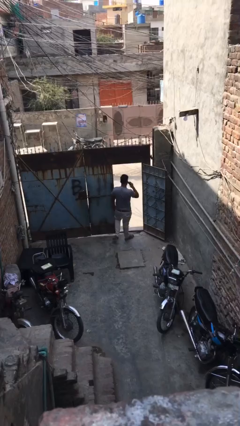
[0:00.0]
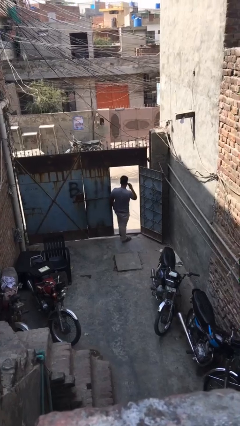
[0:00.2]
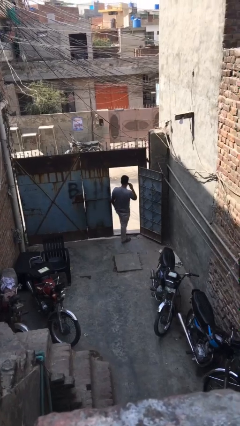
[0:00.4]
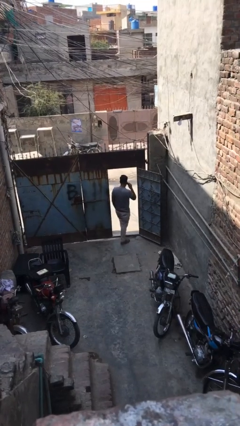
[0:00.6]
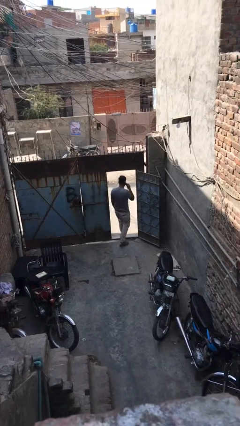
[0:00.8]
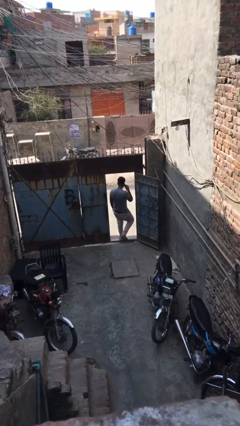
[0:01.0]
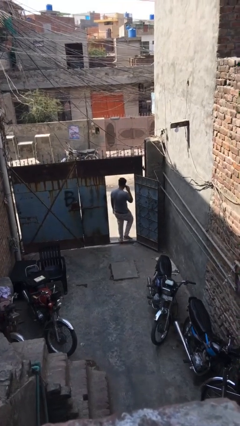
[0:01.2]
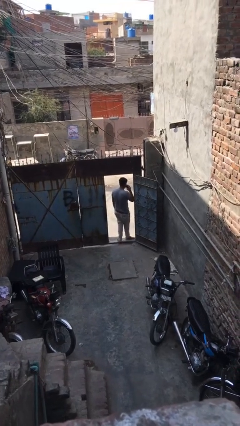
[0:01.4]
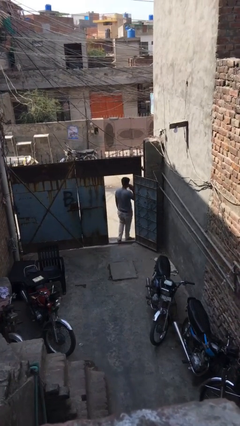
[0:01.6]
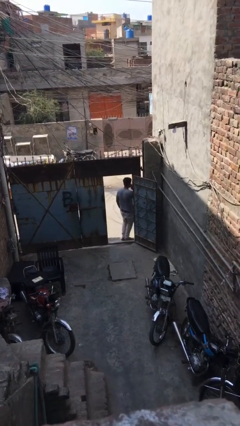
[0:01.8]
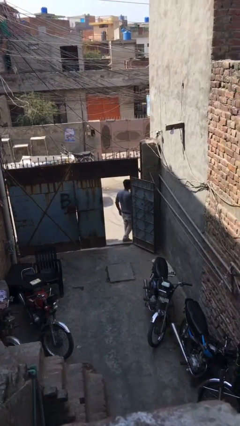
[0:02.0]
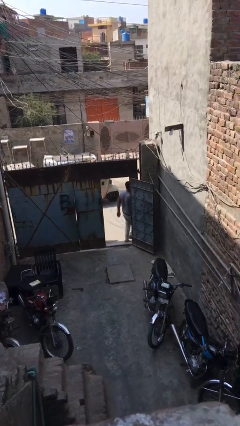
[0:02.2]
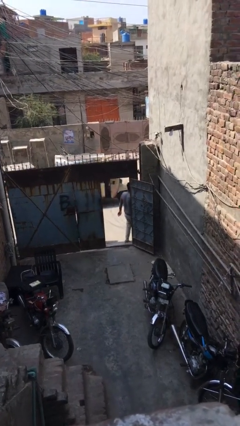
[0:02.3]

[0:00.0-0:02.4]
person exits scene through structure

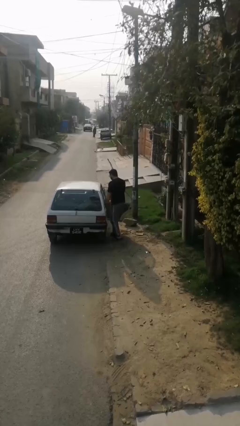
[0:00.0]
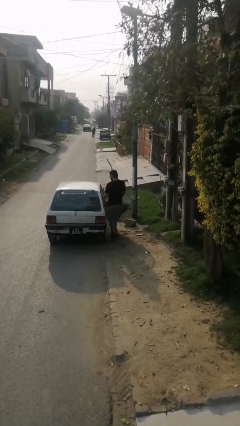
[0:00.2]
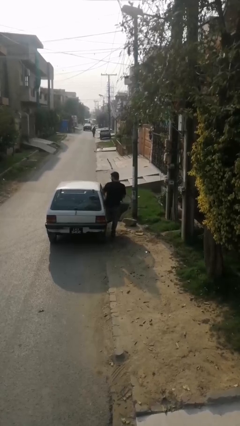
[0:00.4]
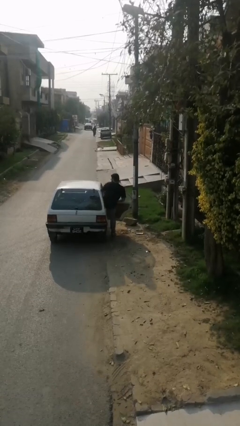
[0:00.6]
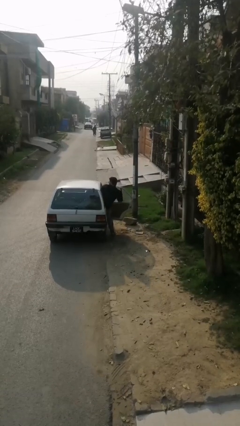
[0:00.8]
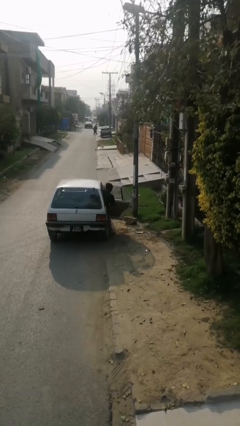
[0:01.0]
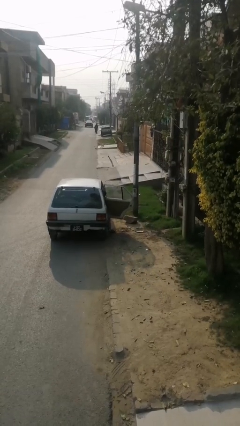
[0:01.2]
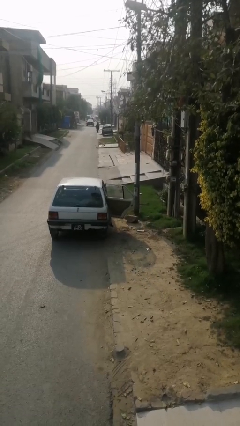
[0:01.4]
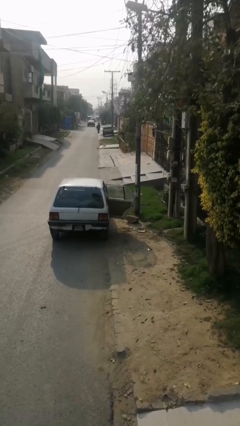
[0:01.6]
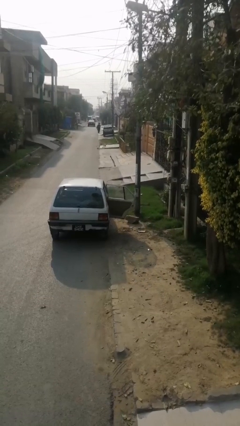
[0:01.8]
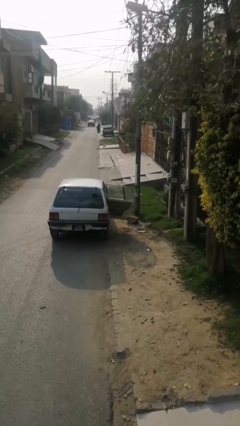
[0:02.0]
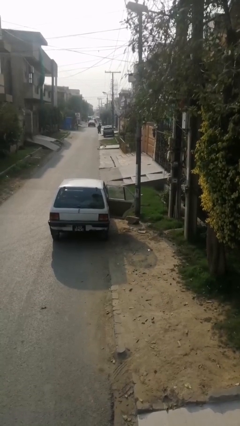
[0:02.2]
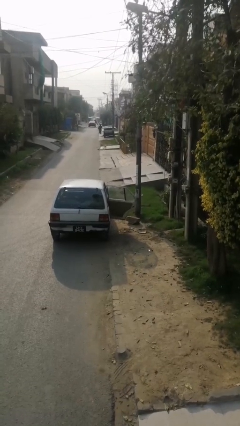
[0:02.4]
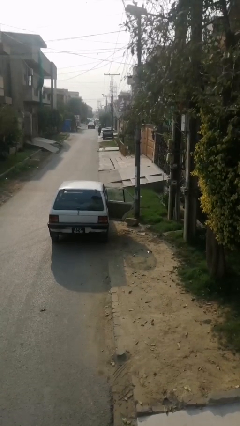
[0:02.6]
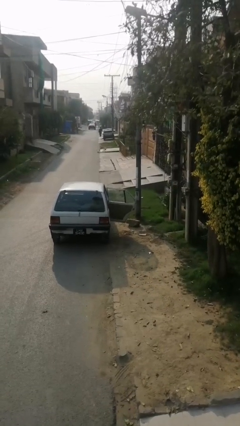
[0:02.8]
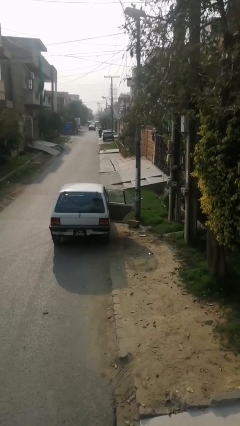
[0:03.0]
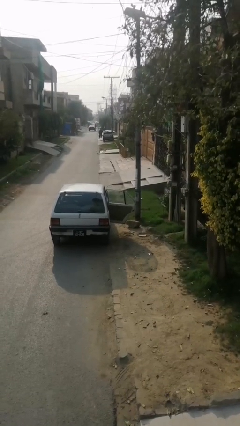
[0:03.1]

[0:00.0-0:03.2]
person enters car

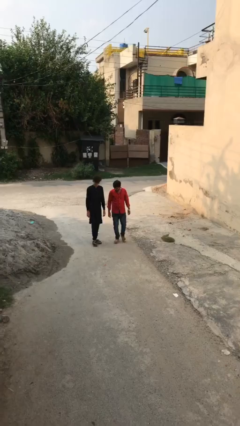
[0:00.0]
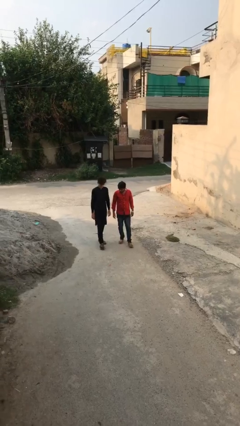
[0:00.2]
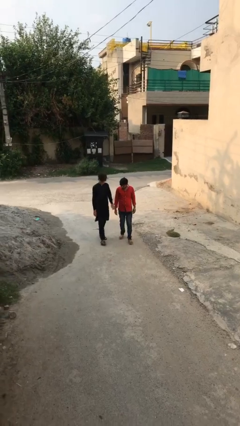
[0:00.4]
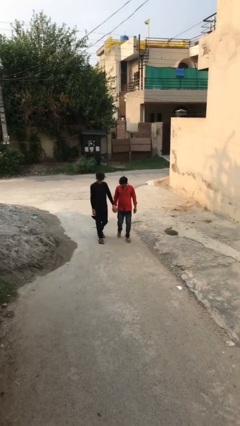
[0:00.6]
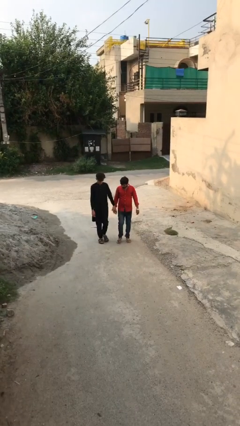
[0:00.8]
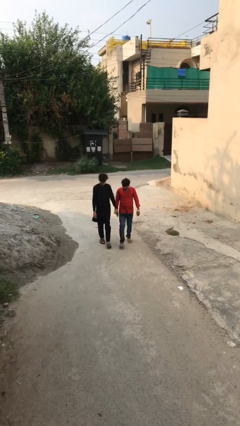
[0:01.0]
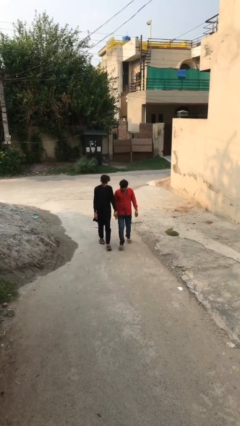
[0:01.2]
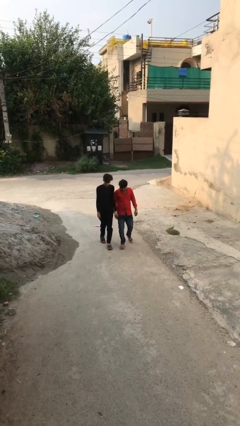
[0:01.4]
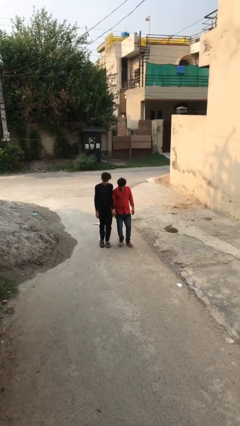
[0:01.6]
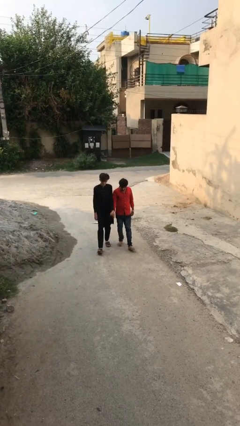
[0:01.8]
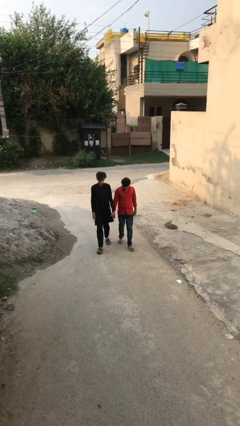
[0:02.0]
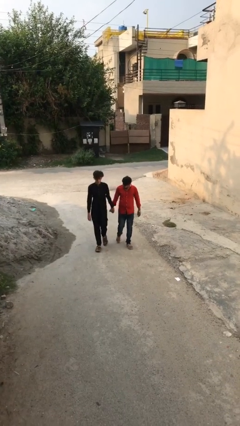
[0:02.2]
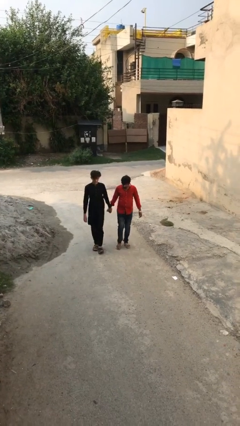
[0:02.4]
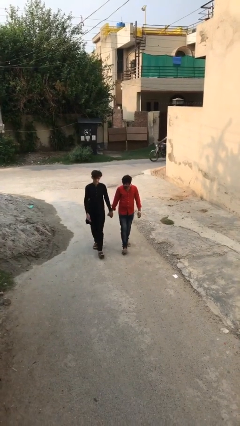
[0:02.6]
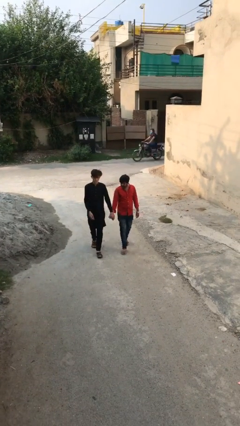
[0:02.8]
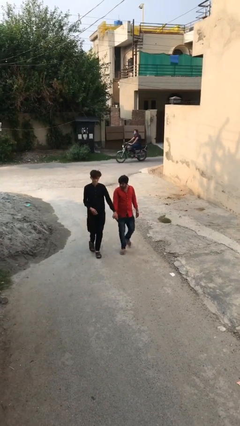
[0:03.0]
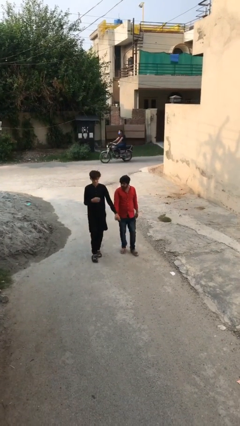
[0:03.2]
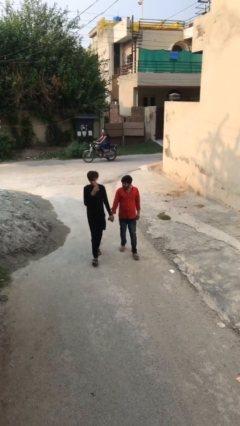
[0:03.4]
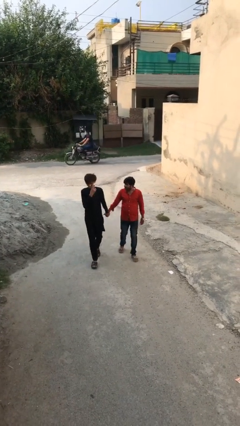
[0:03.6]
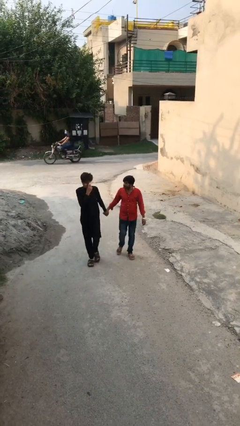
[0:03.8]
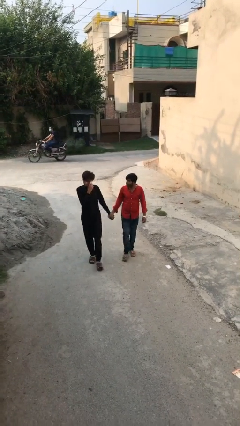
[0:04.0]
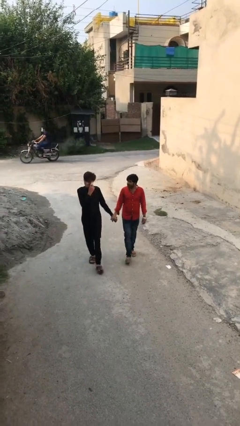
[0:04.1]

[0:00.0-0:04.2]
person holds hand

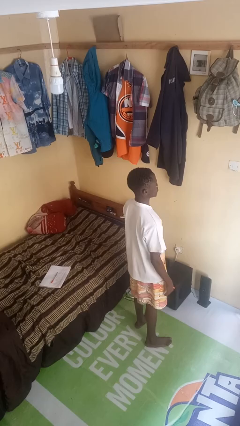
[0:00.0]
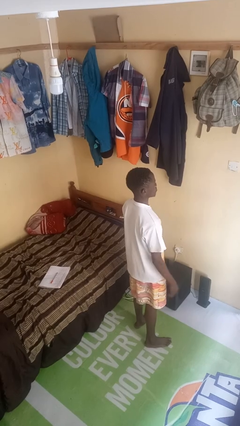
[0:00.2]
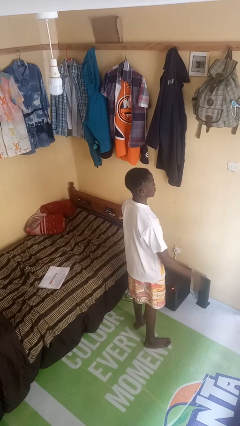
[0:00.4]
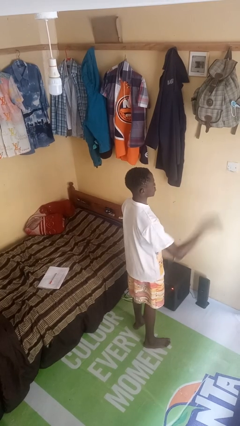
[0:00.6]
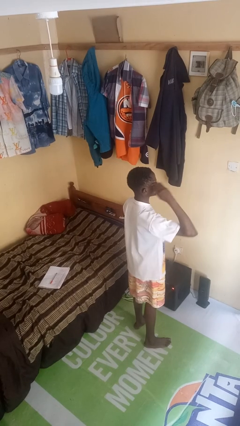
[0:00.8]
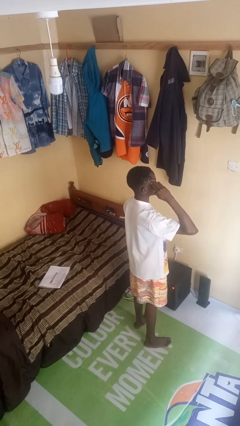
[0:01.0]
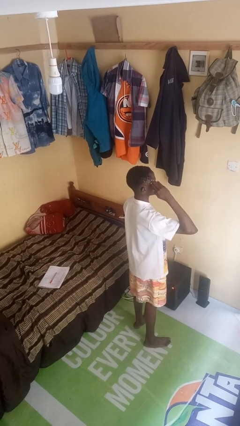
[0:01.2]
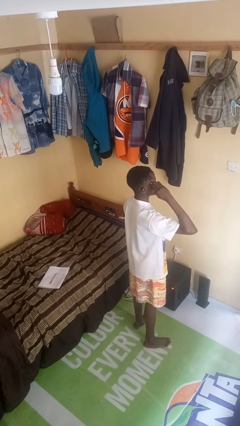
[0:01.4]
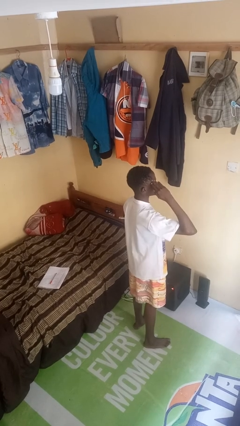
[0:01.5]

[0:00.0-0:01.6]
person salutes

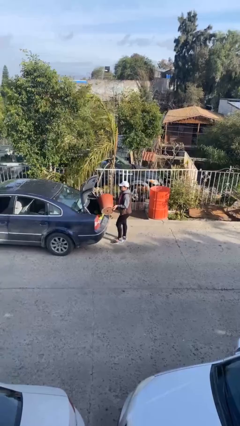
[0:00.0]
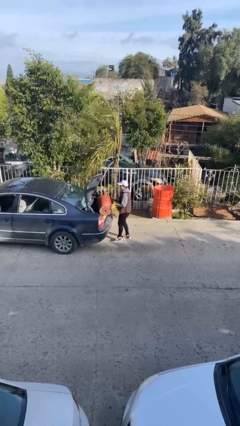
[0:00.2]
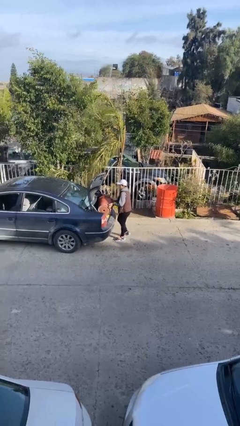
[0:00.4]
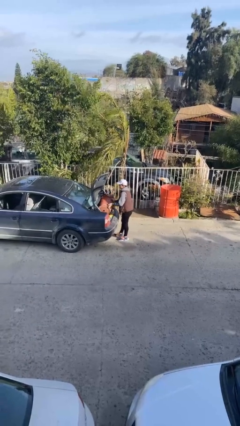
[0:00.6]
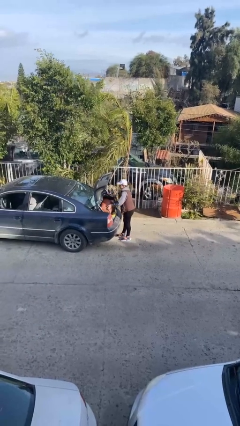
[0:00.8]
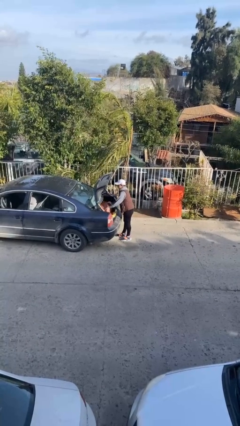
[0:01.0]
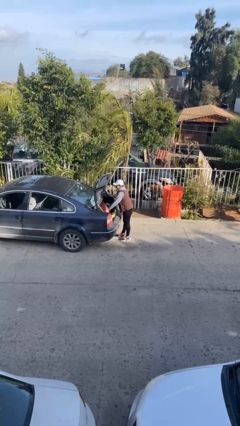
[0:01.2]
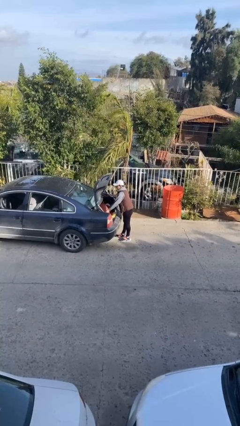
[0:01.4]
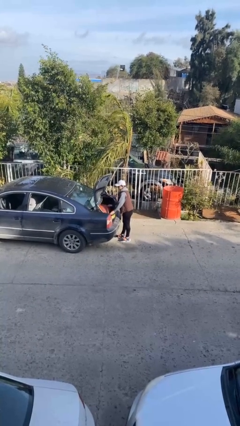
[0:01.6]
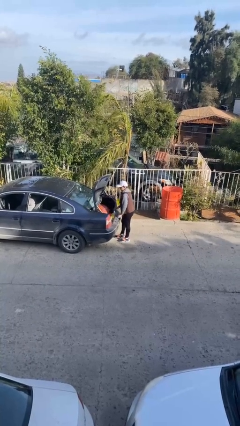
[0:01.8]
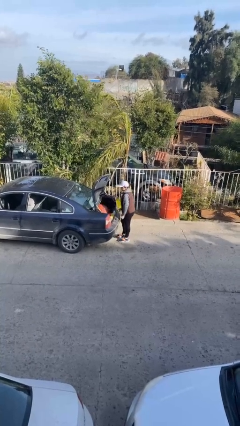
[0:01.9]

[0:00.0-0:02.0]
person loads car

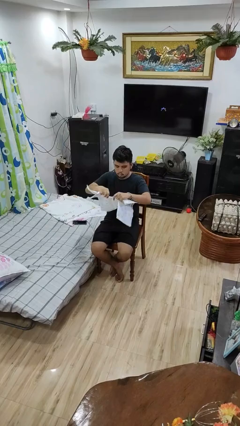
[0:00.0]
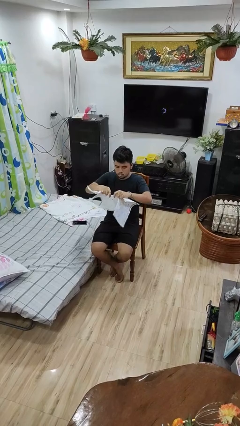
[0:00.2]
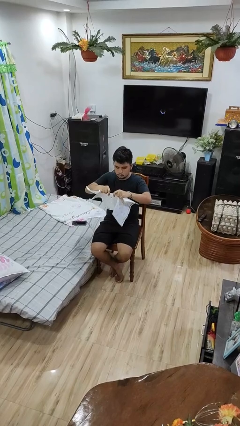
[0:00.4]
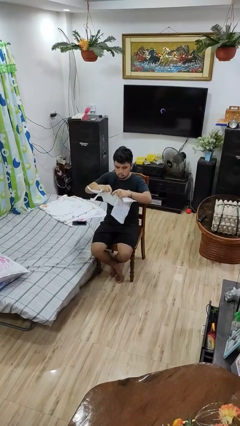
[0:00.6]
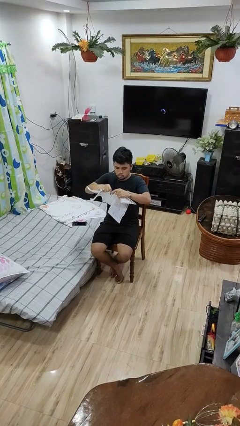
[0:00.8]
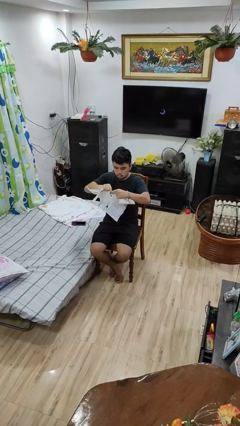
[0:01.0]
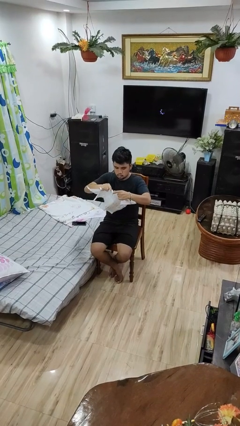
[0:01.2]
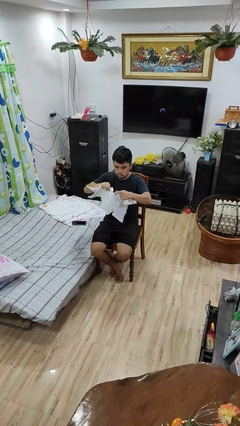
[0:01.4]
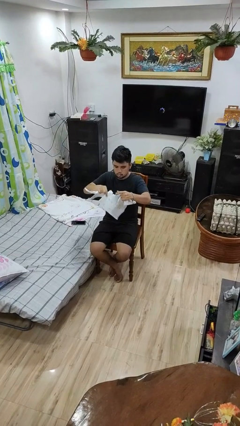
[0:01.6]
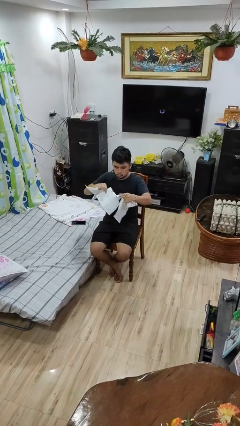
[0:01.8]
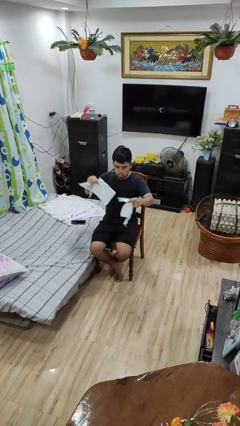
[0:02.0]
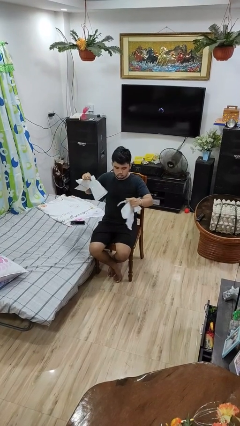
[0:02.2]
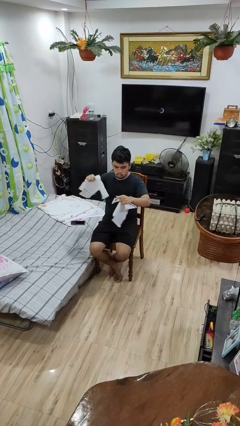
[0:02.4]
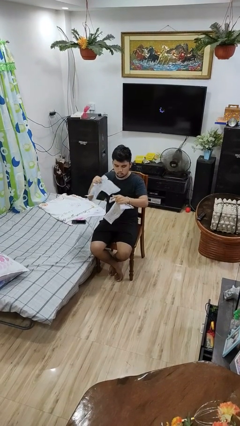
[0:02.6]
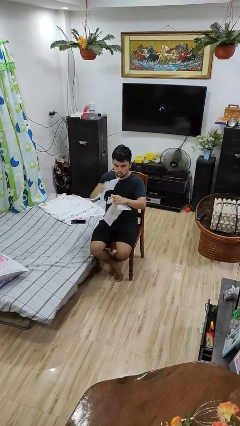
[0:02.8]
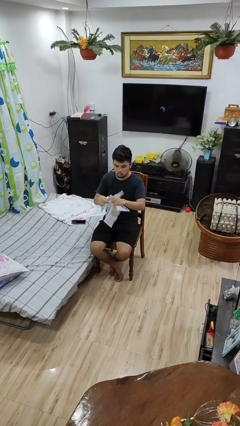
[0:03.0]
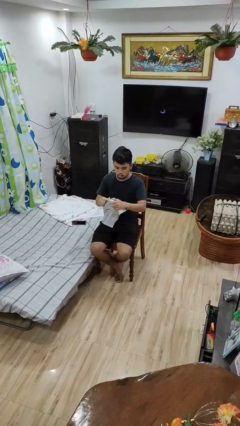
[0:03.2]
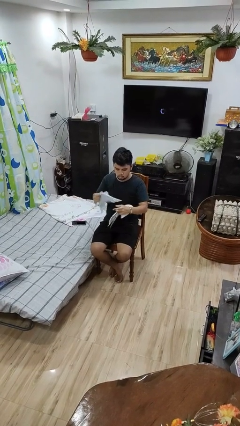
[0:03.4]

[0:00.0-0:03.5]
person tears paper

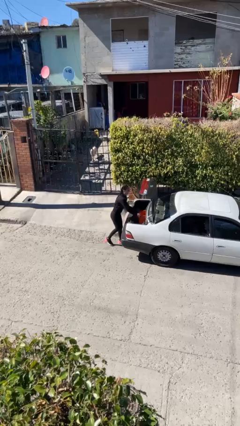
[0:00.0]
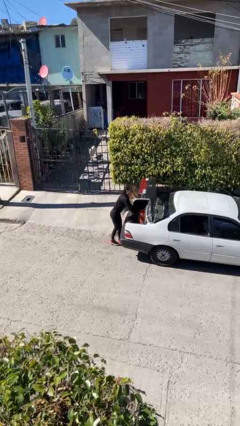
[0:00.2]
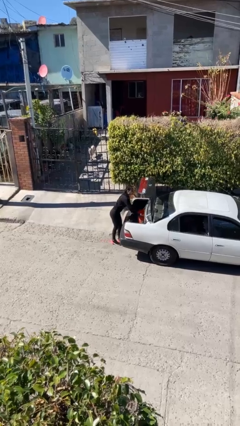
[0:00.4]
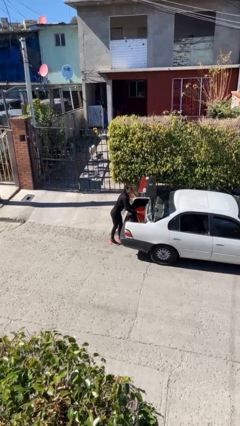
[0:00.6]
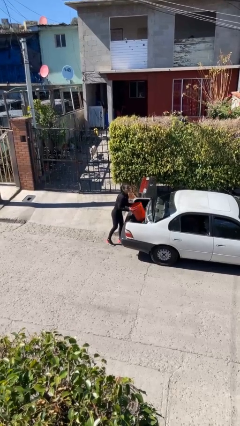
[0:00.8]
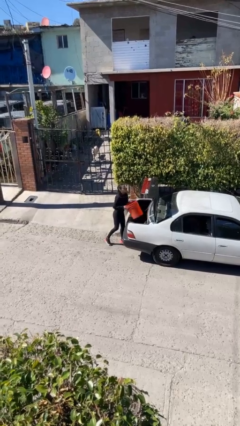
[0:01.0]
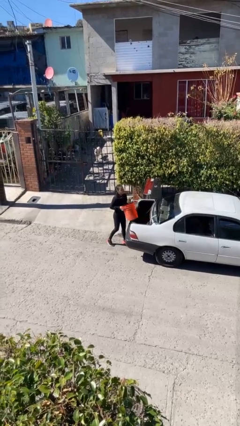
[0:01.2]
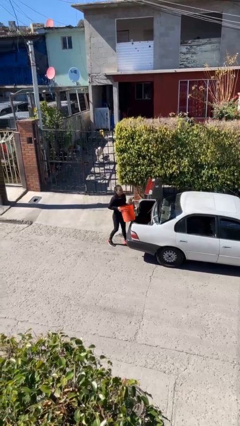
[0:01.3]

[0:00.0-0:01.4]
person unloads car
